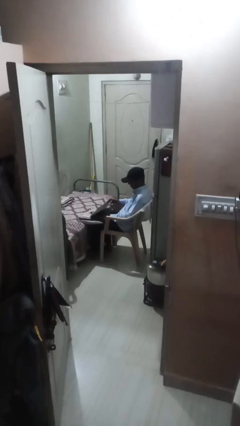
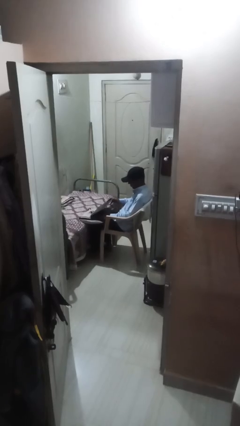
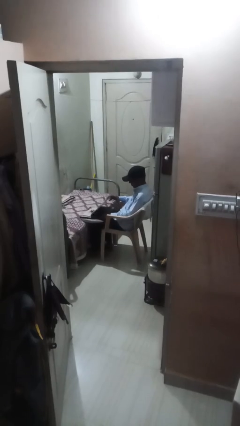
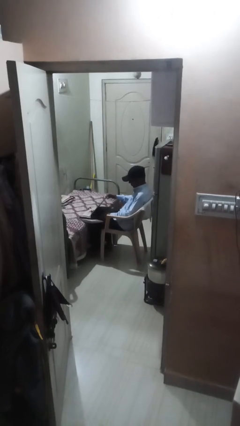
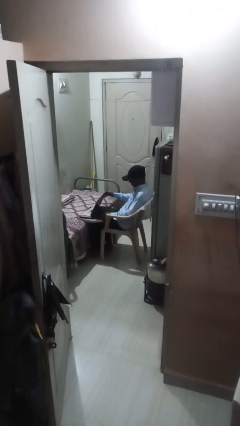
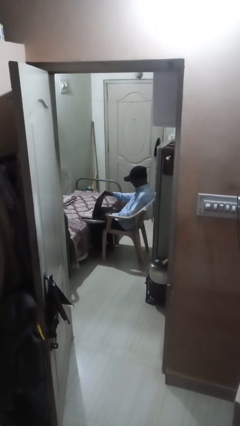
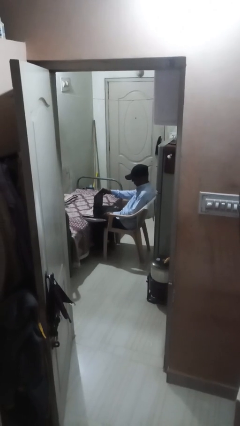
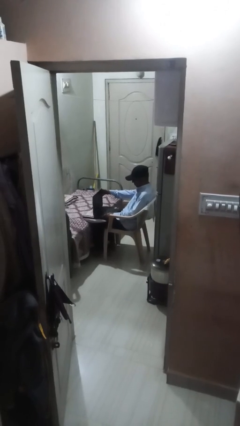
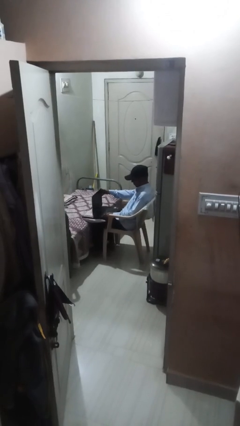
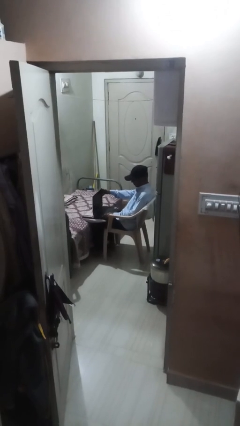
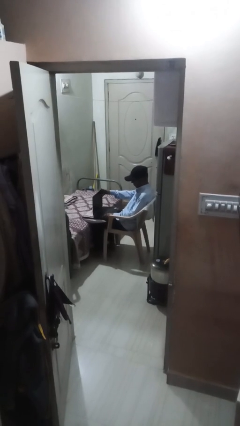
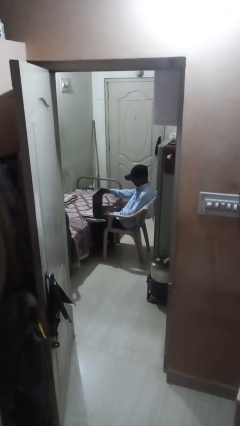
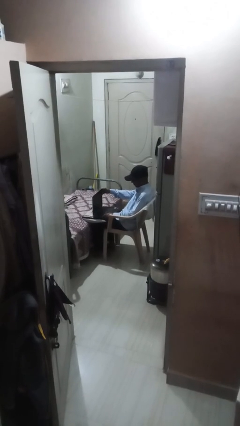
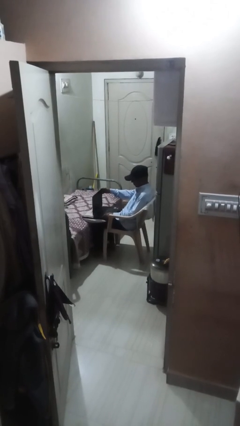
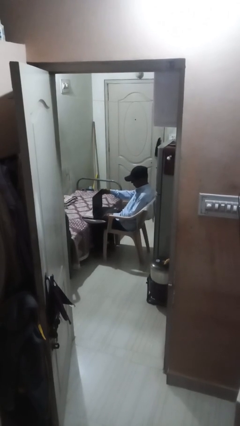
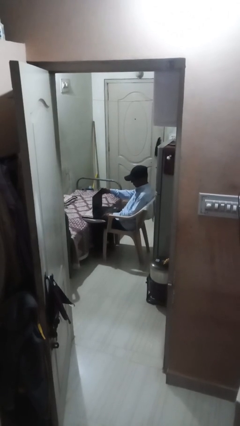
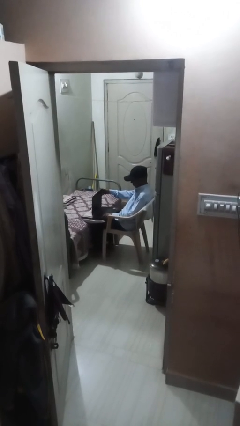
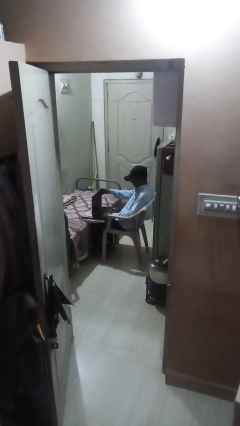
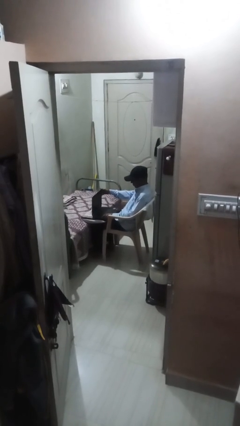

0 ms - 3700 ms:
person interacts with laptop

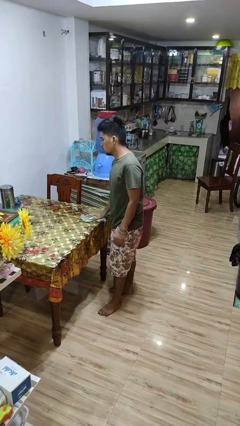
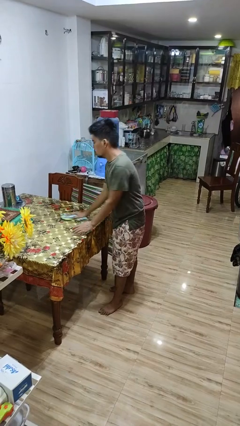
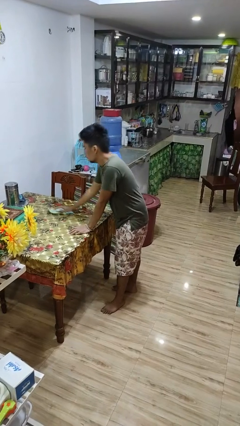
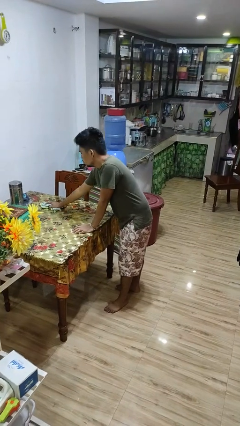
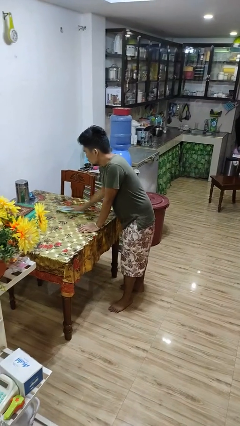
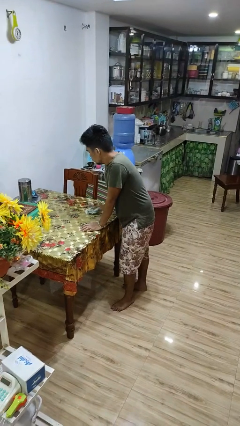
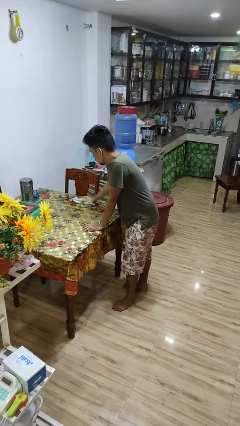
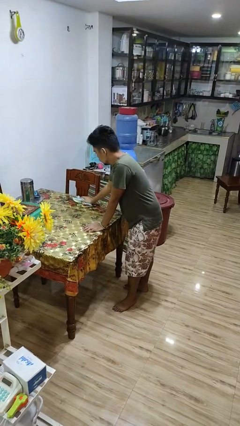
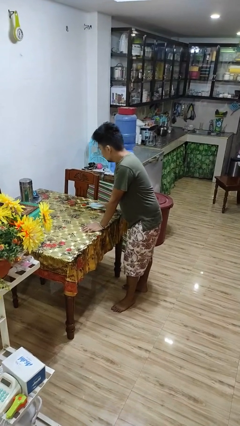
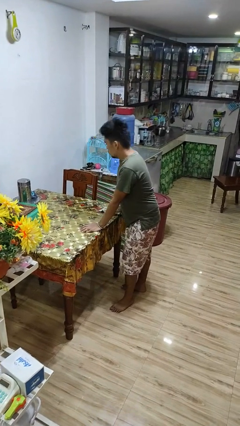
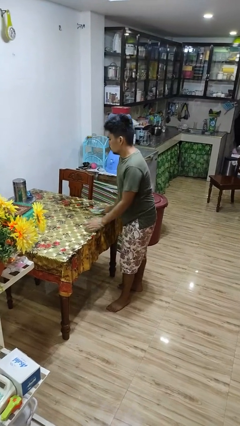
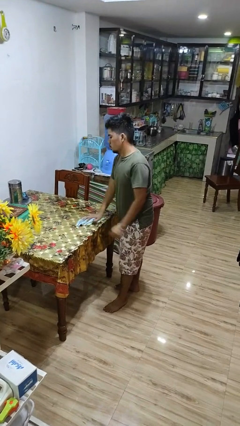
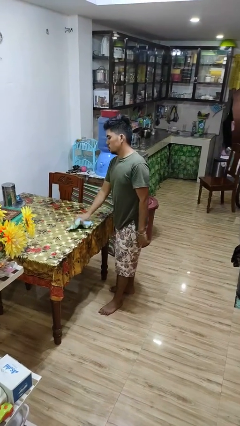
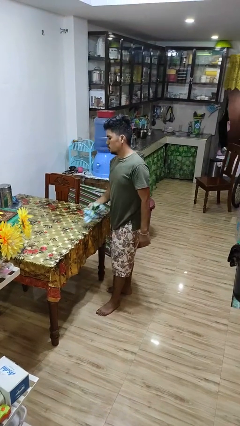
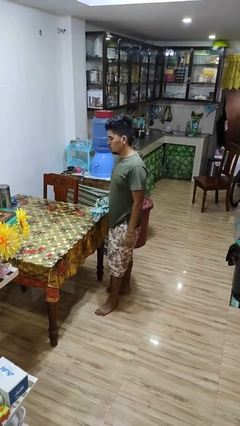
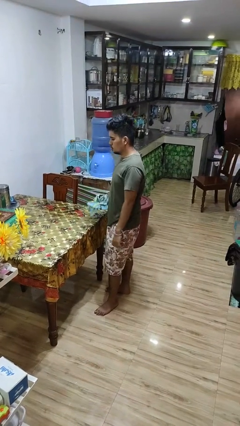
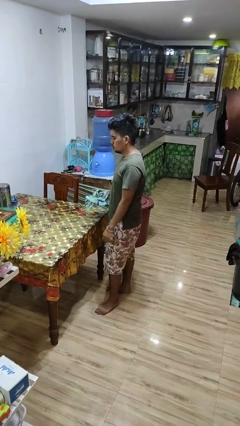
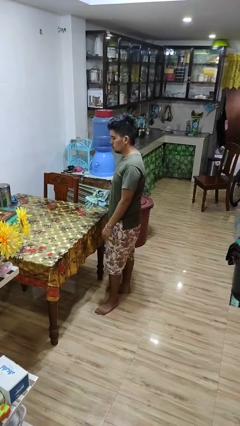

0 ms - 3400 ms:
person cleans table with rag

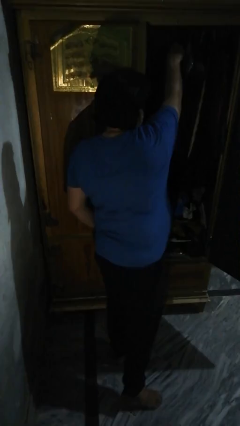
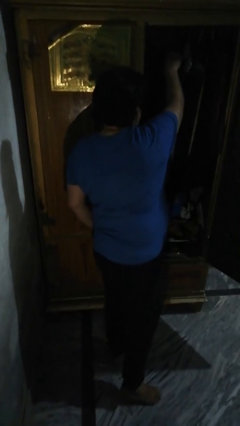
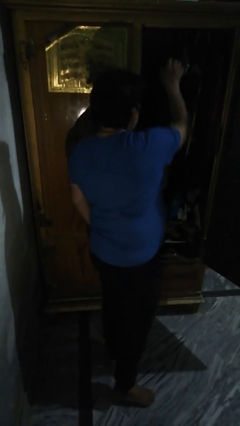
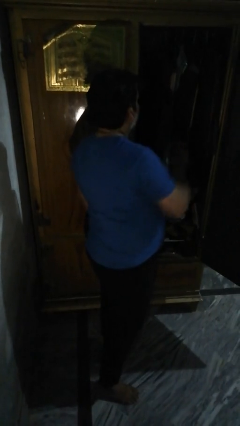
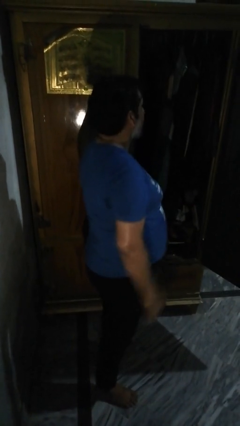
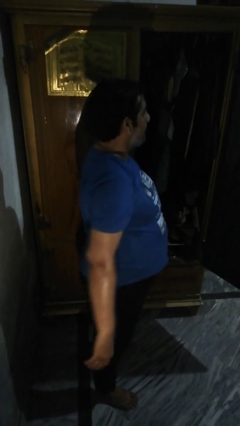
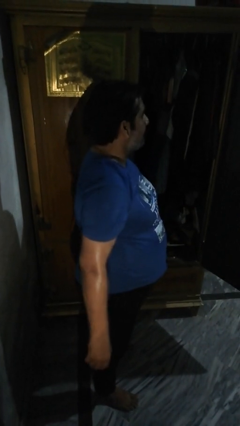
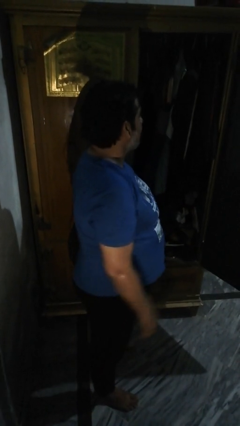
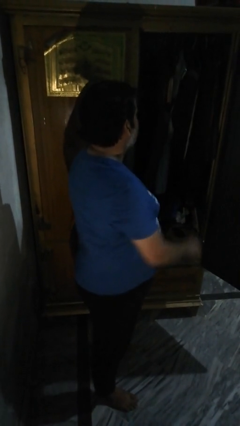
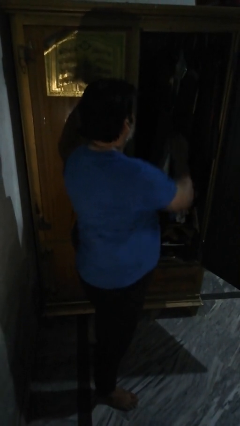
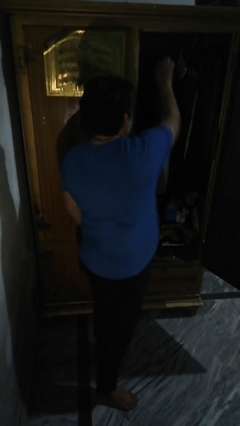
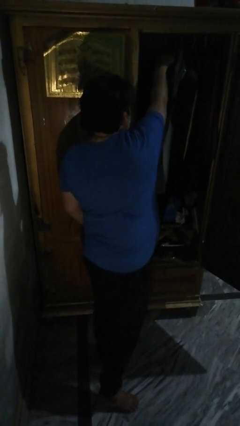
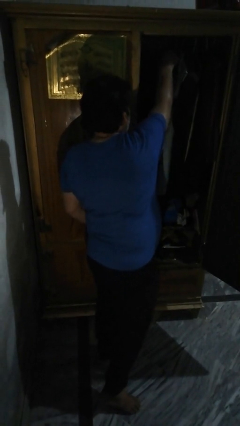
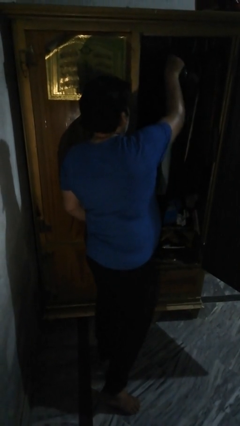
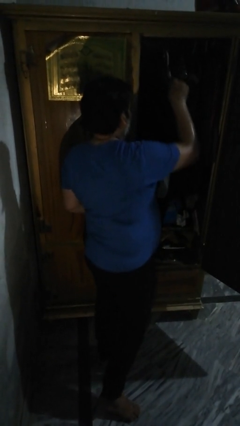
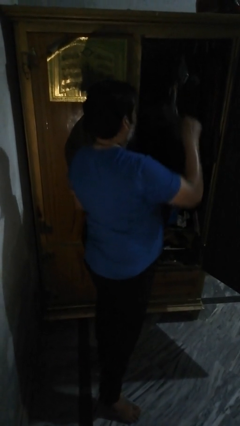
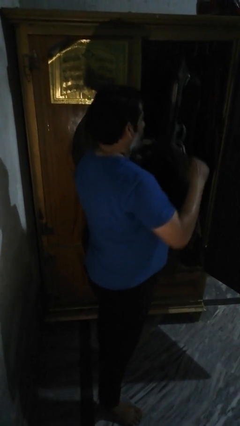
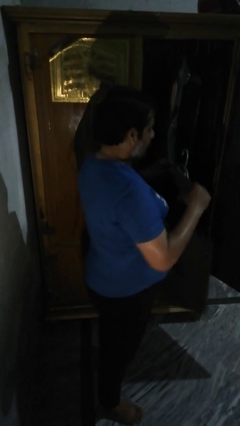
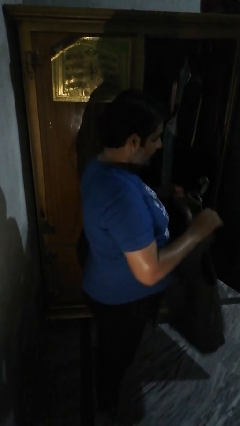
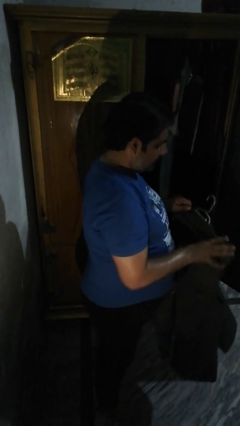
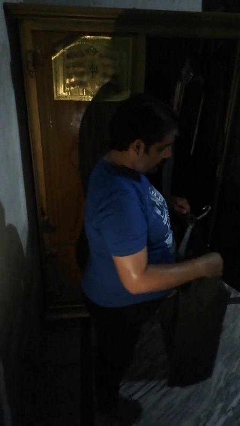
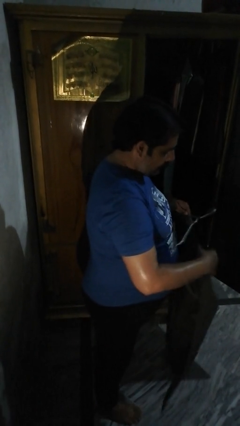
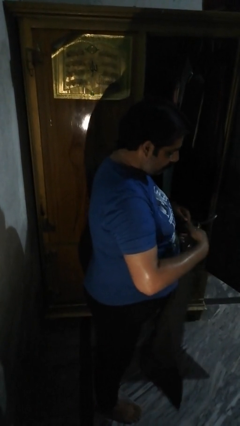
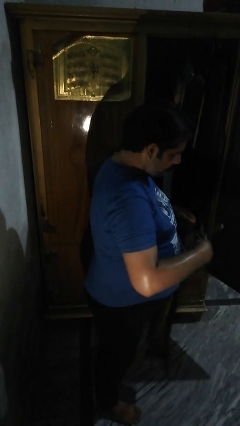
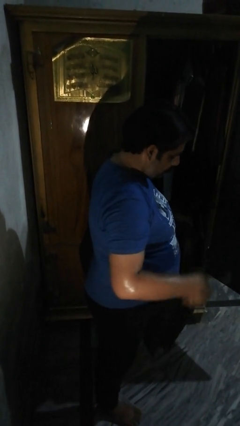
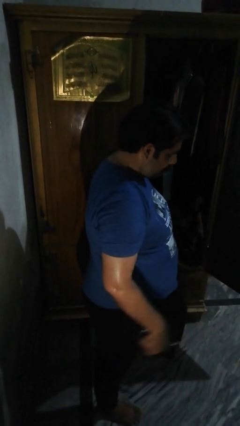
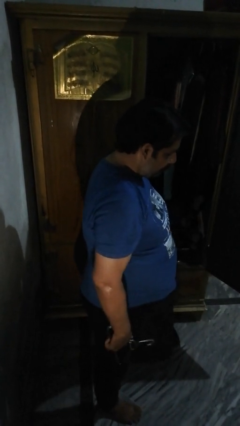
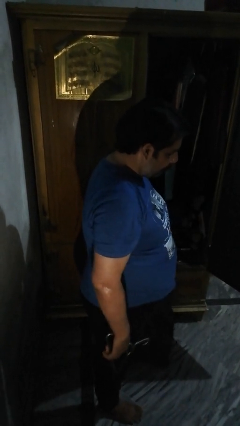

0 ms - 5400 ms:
person takes clothes from closet

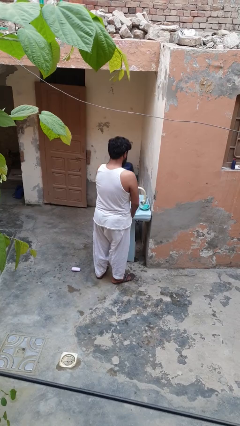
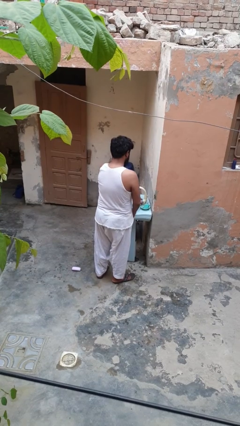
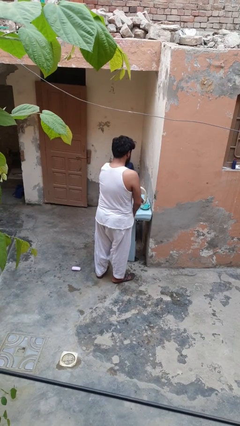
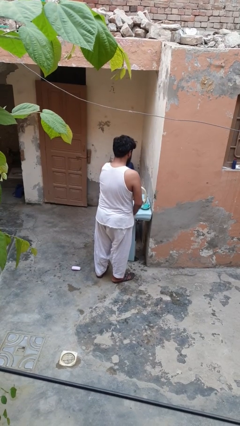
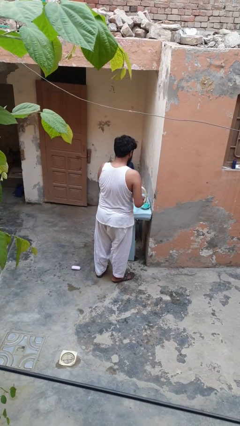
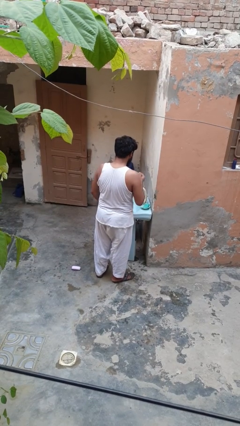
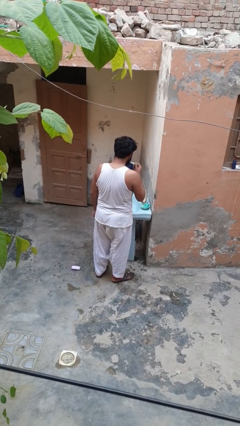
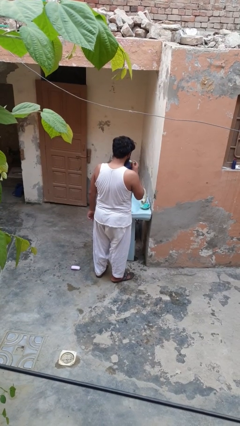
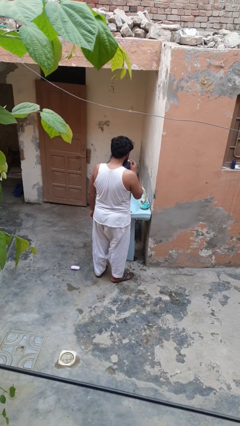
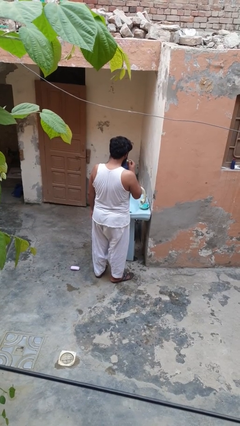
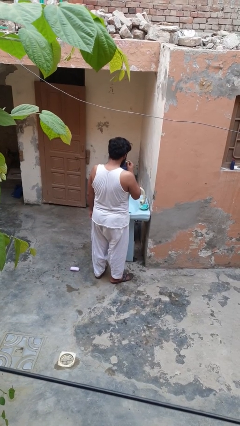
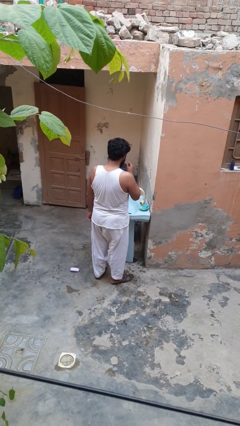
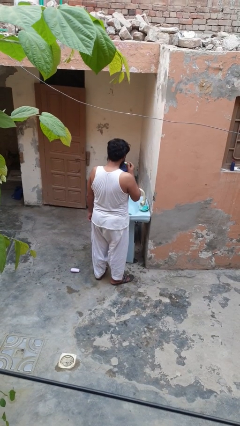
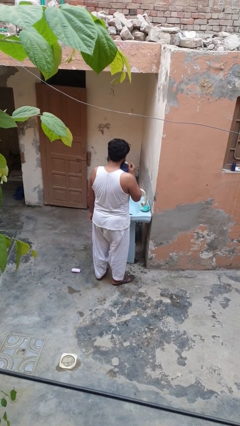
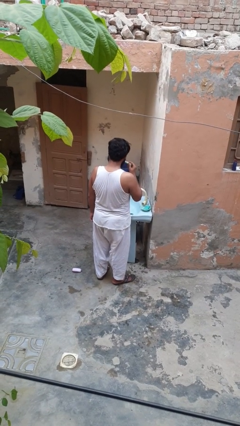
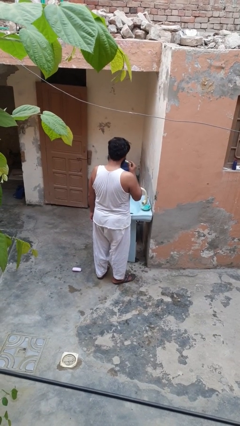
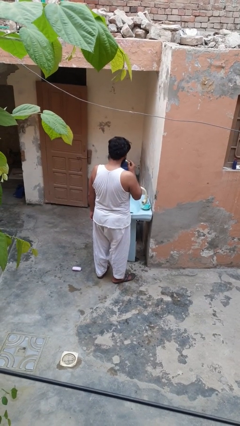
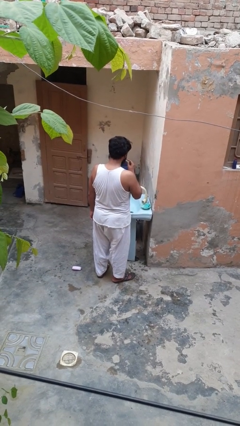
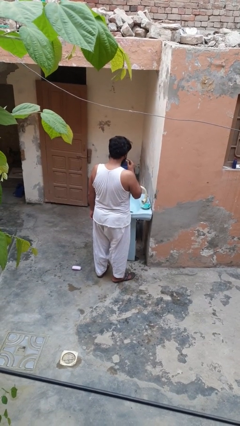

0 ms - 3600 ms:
person brushes teeth

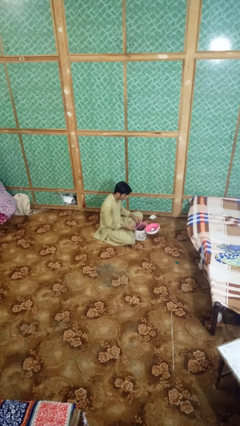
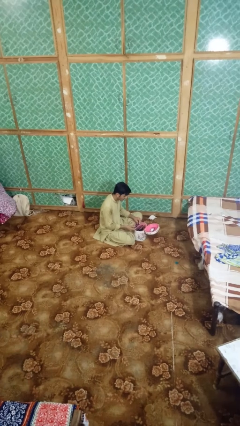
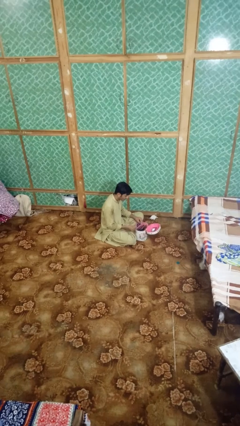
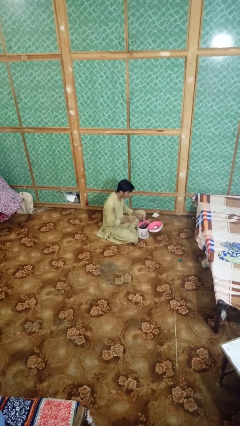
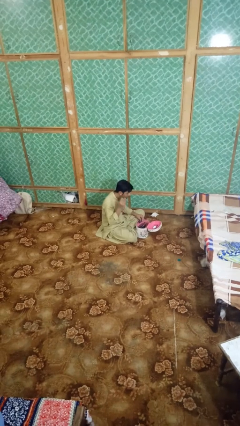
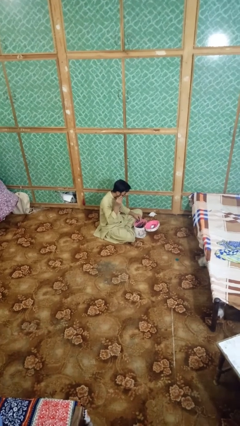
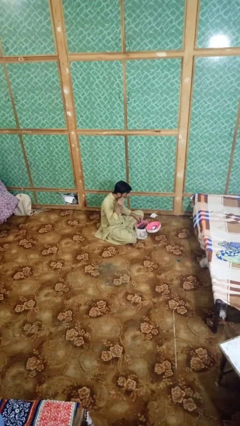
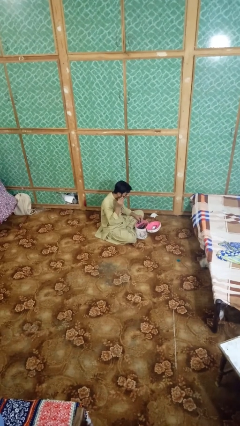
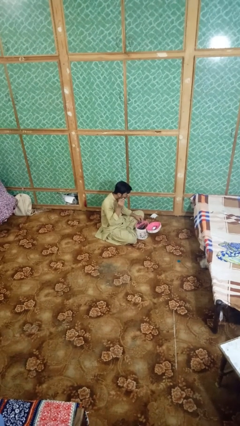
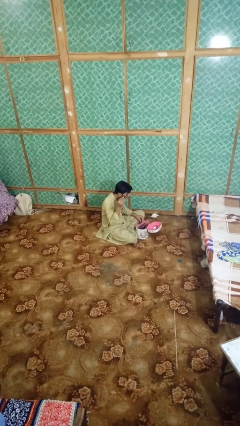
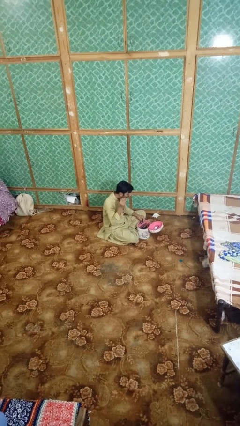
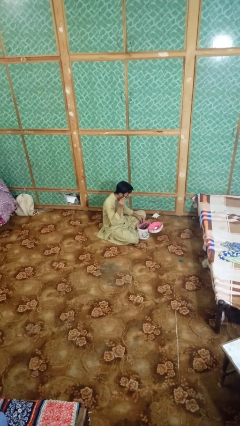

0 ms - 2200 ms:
person applies eye makeup
